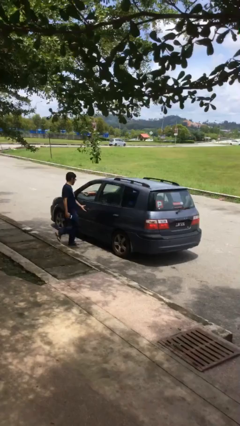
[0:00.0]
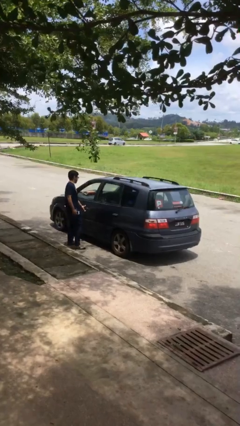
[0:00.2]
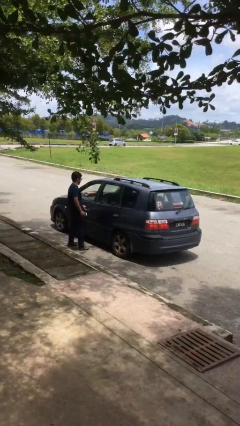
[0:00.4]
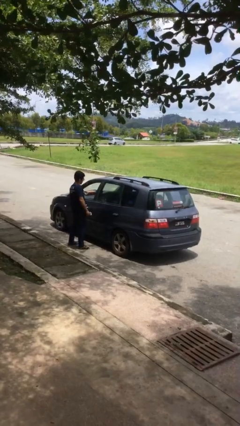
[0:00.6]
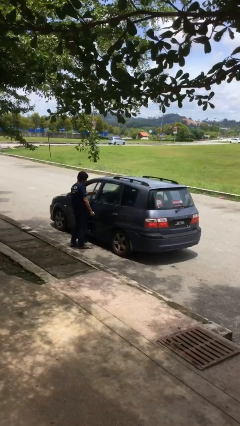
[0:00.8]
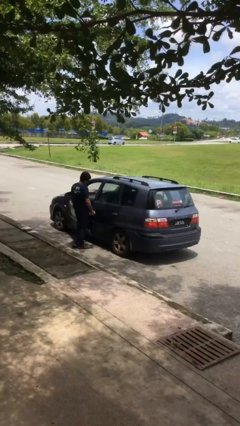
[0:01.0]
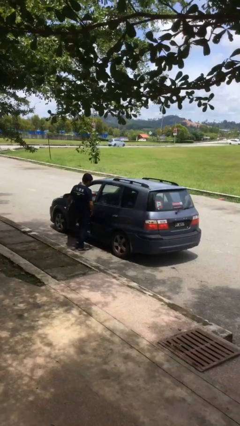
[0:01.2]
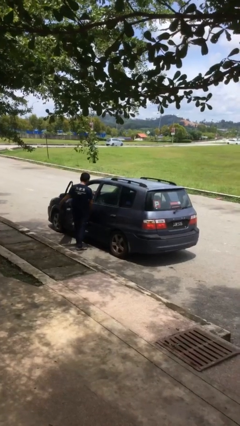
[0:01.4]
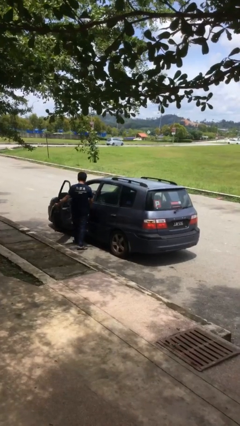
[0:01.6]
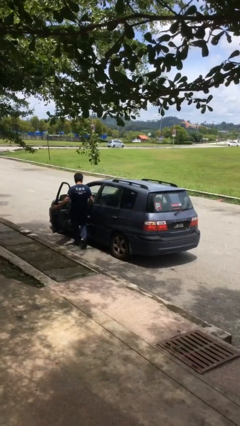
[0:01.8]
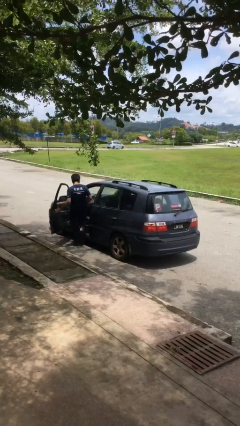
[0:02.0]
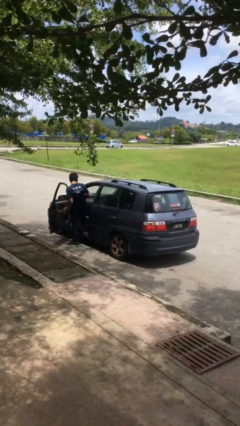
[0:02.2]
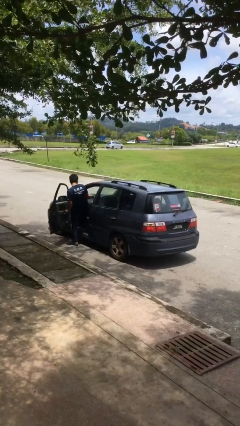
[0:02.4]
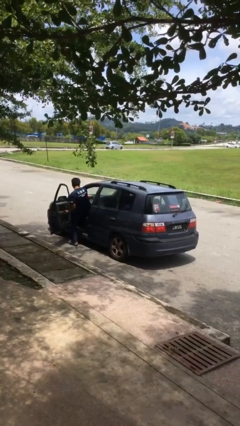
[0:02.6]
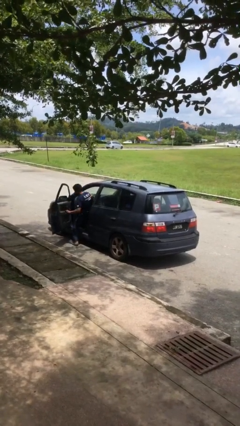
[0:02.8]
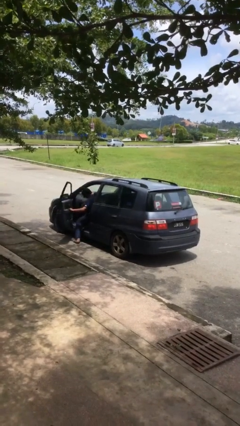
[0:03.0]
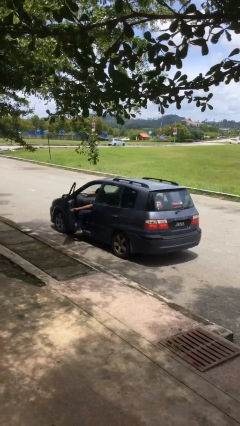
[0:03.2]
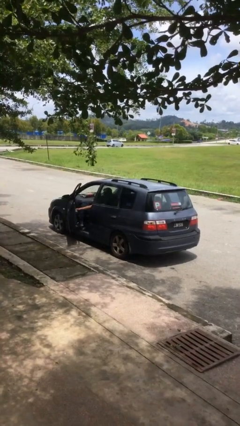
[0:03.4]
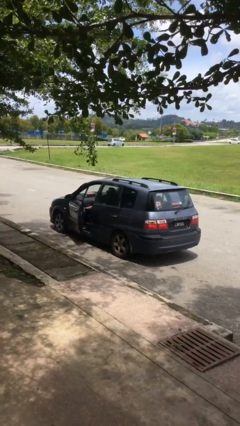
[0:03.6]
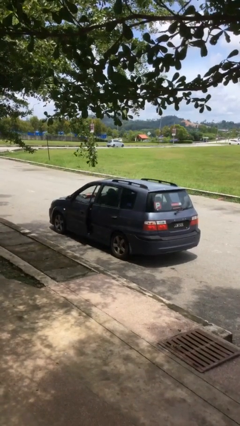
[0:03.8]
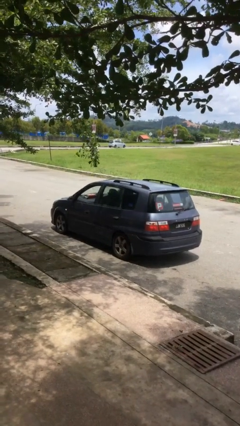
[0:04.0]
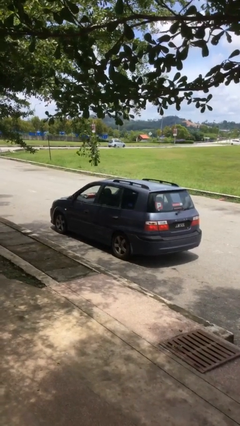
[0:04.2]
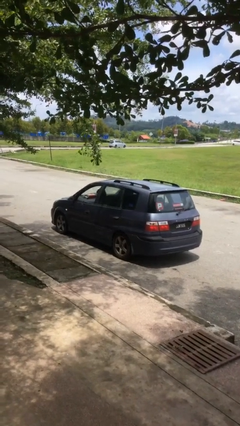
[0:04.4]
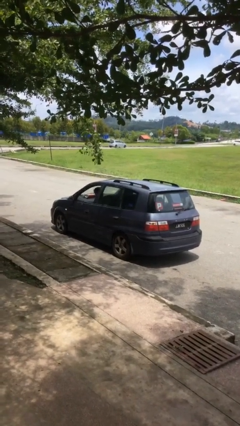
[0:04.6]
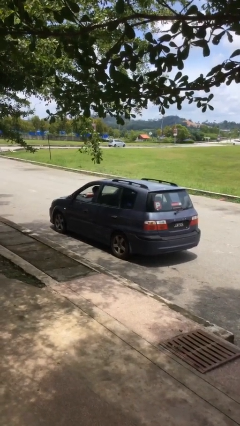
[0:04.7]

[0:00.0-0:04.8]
car picks up person

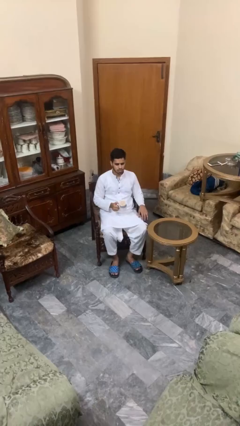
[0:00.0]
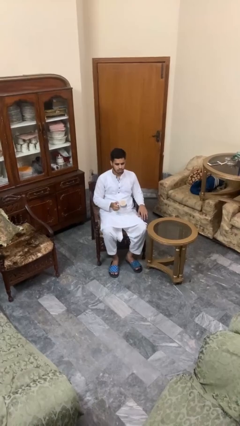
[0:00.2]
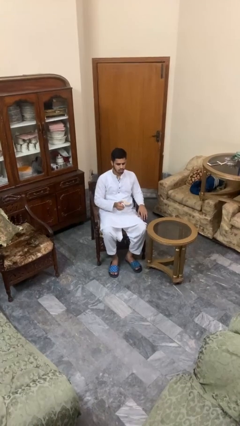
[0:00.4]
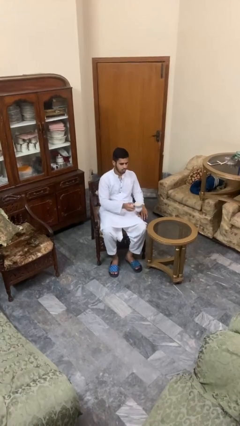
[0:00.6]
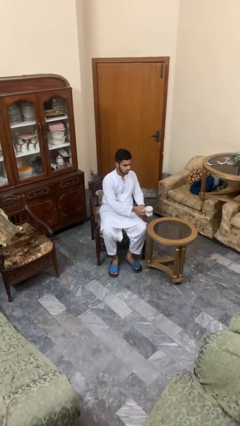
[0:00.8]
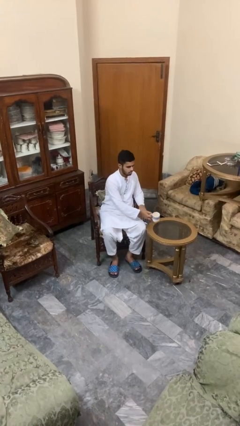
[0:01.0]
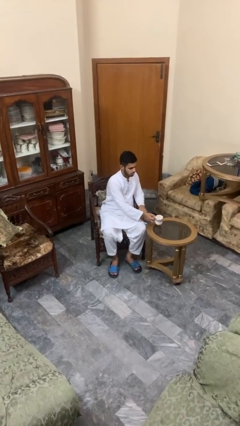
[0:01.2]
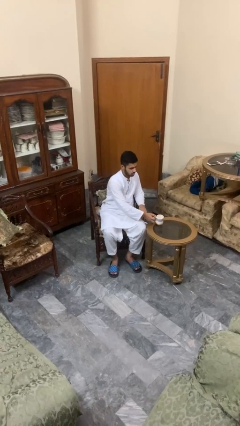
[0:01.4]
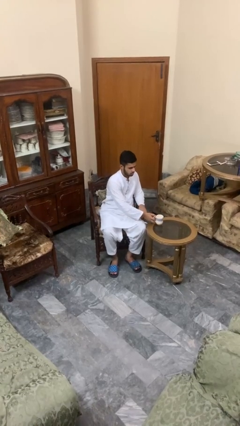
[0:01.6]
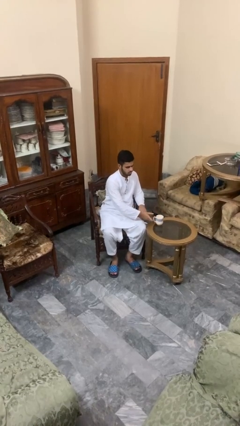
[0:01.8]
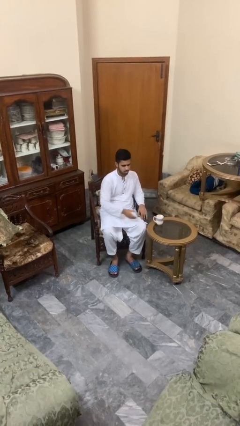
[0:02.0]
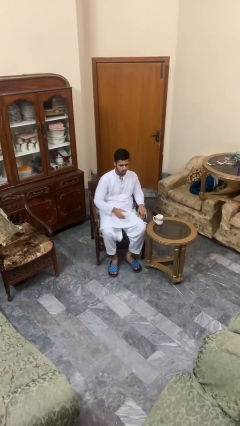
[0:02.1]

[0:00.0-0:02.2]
person puts down object on table

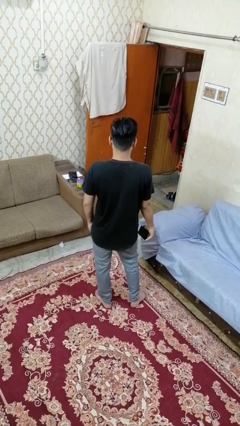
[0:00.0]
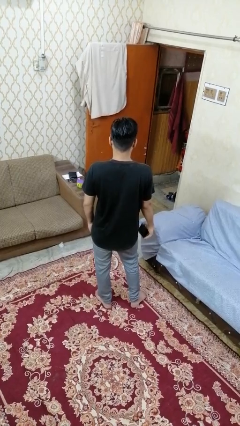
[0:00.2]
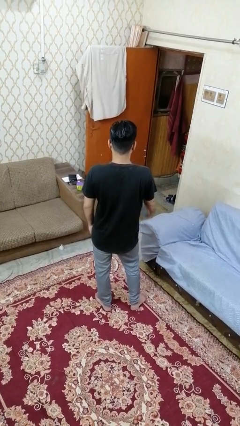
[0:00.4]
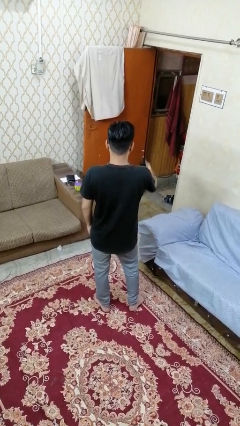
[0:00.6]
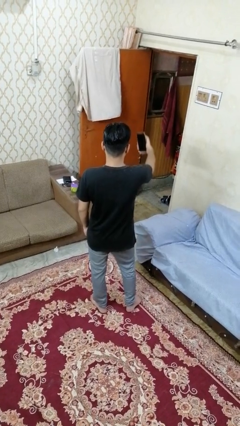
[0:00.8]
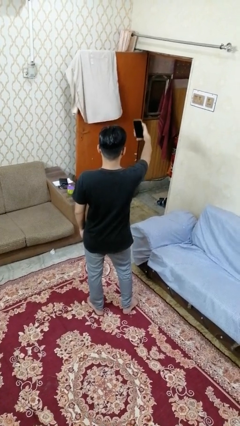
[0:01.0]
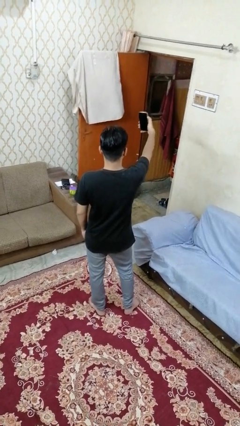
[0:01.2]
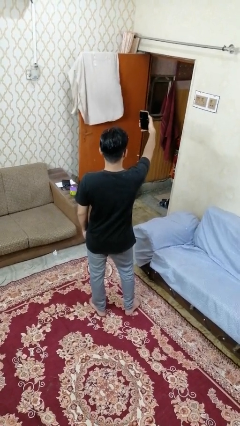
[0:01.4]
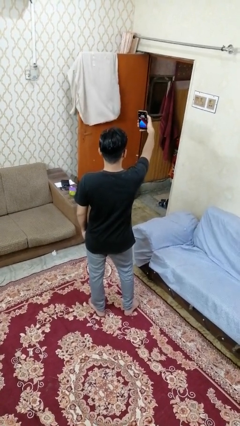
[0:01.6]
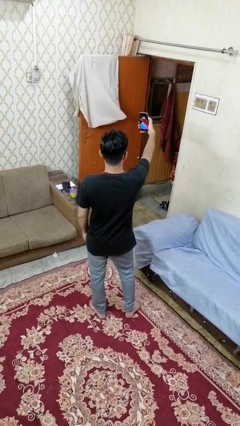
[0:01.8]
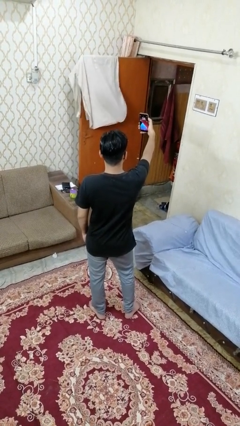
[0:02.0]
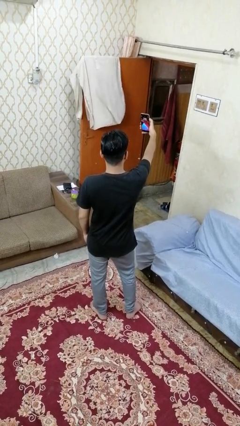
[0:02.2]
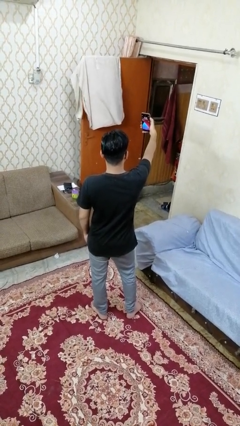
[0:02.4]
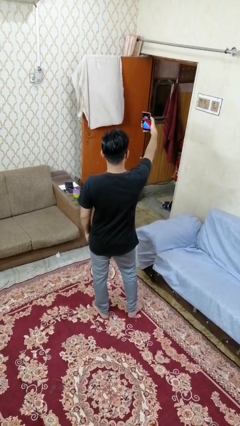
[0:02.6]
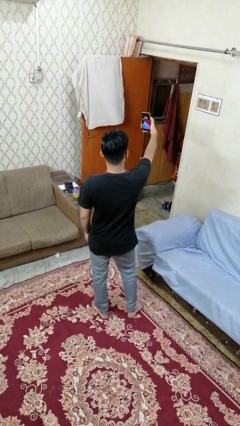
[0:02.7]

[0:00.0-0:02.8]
person takes selfie

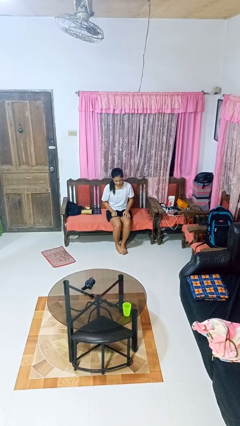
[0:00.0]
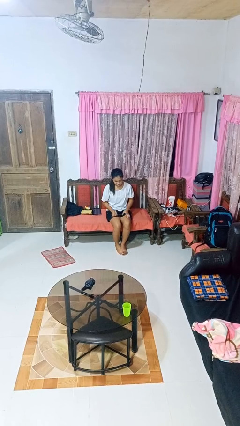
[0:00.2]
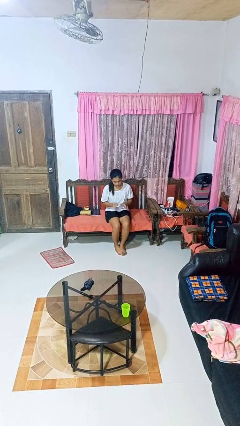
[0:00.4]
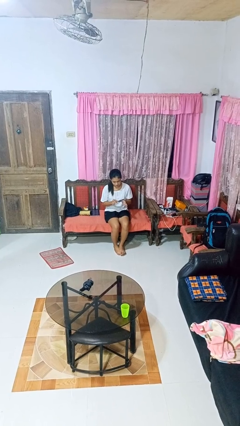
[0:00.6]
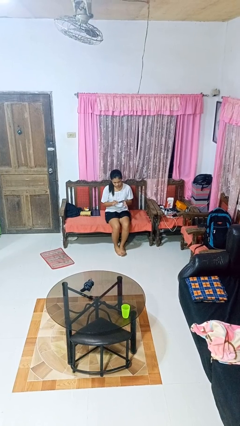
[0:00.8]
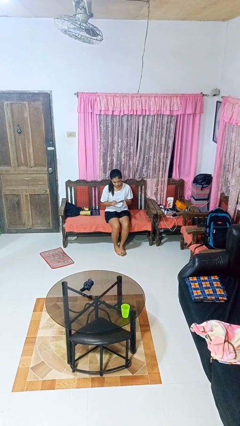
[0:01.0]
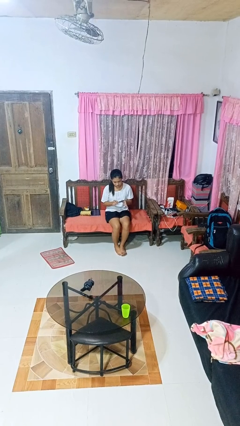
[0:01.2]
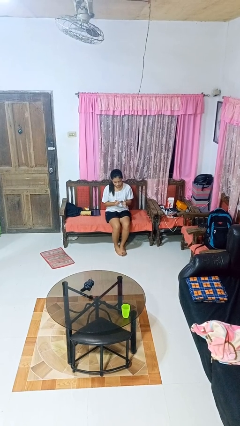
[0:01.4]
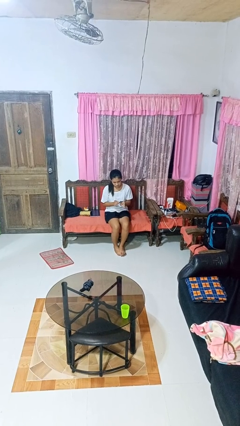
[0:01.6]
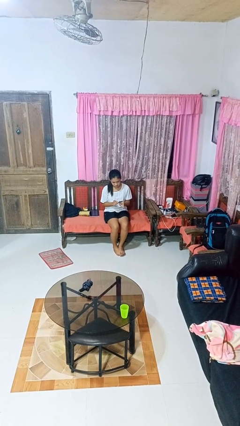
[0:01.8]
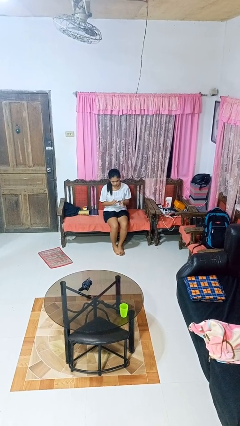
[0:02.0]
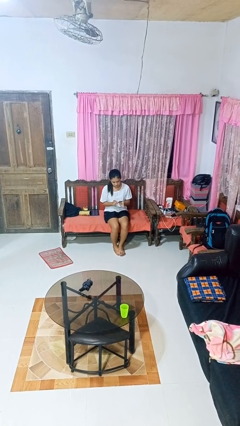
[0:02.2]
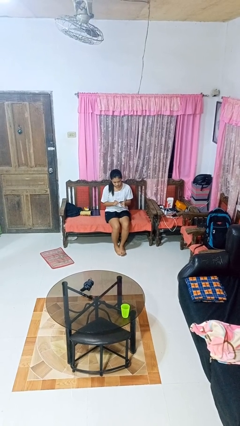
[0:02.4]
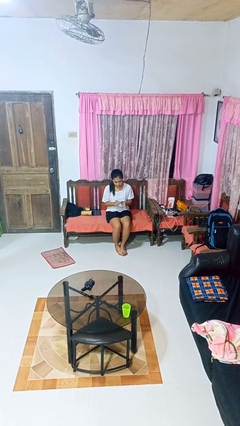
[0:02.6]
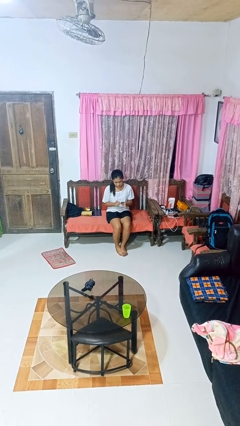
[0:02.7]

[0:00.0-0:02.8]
person files fingernails

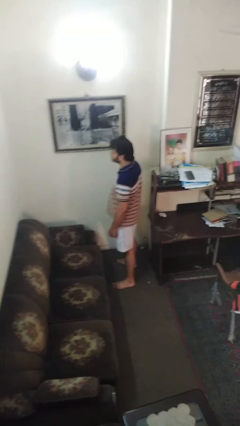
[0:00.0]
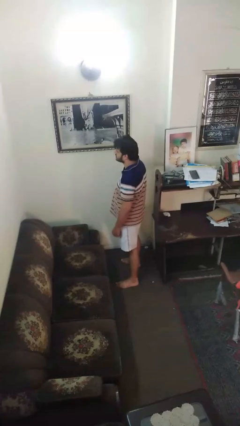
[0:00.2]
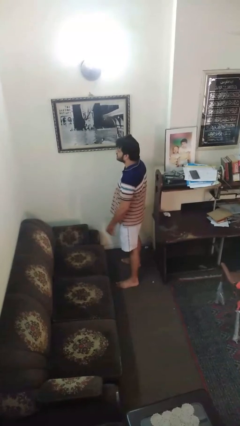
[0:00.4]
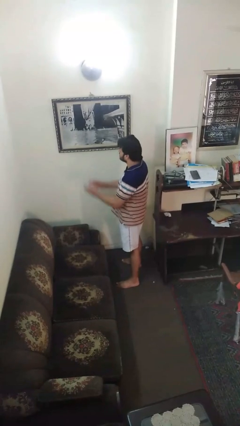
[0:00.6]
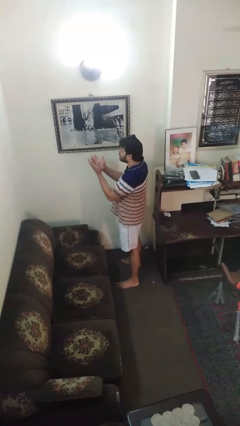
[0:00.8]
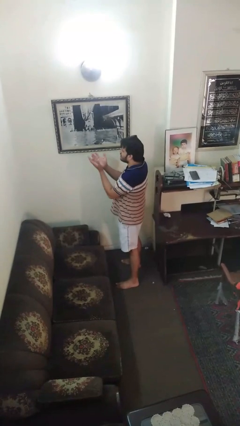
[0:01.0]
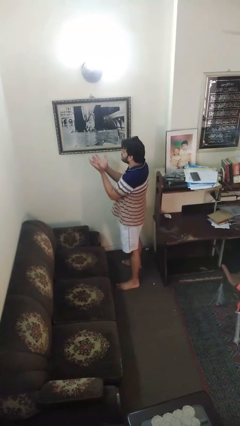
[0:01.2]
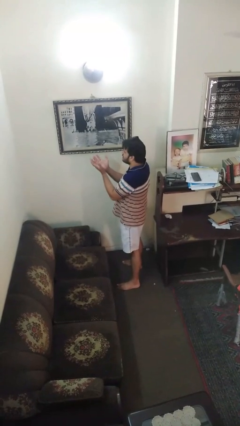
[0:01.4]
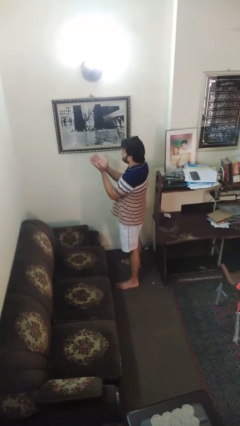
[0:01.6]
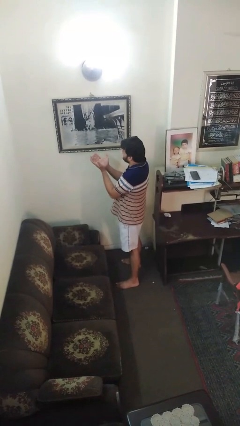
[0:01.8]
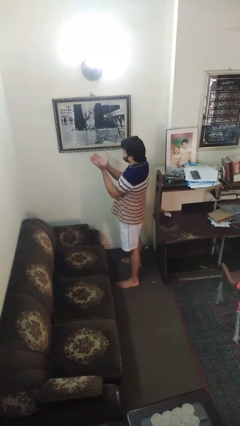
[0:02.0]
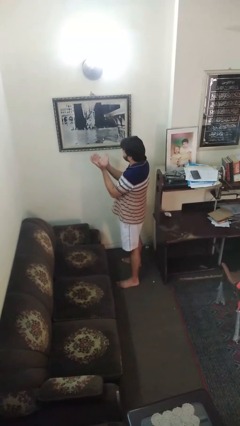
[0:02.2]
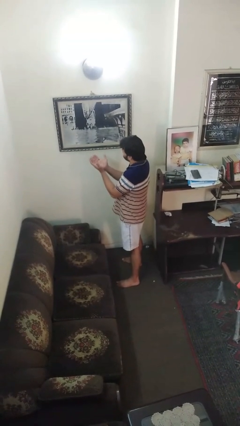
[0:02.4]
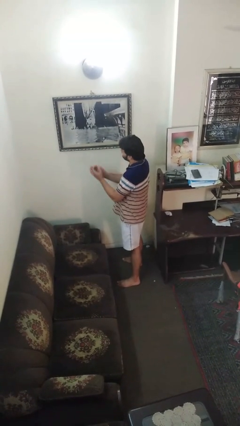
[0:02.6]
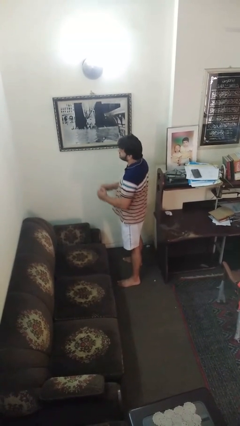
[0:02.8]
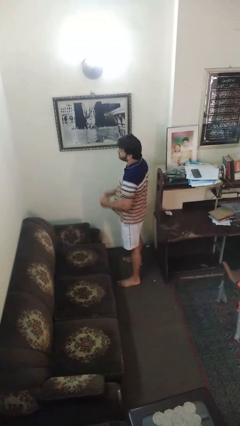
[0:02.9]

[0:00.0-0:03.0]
person prays

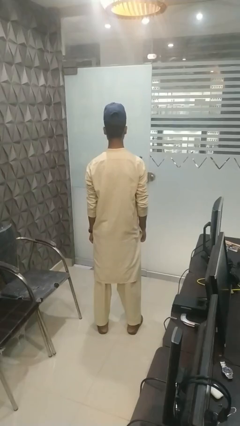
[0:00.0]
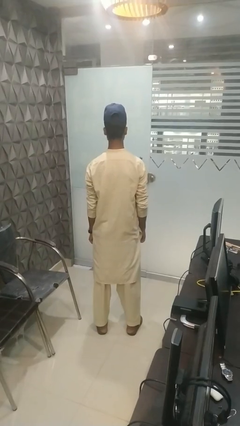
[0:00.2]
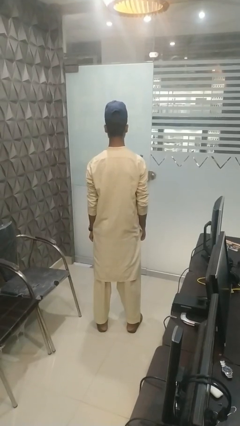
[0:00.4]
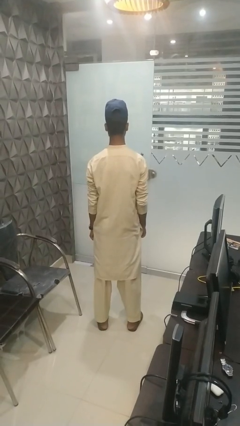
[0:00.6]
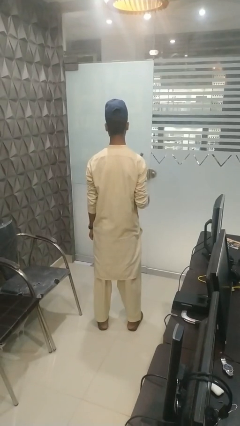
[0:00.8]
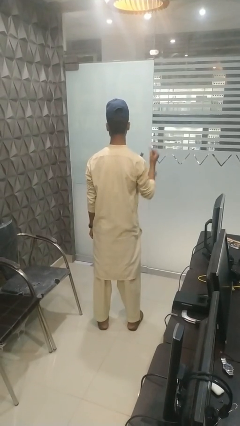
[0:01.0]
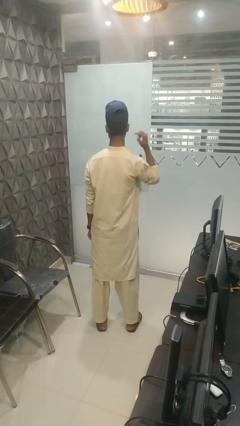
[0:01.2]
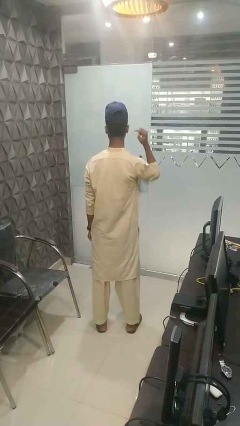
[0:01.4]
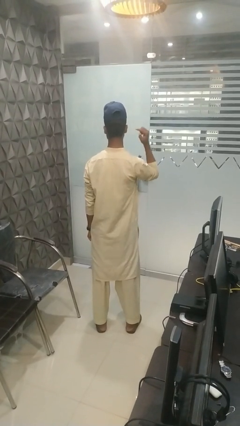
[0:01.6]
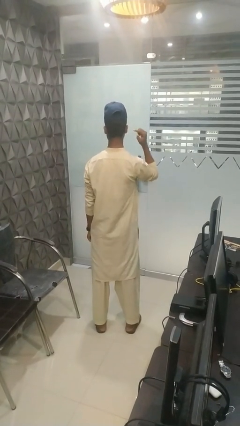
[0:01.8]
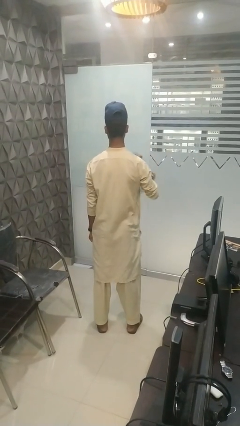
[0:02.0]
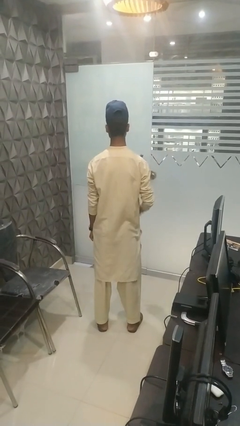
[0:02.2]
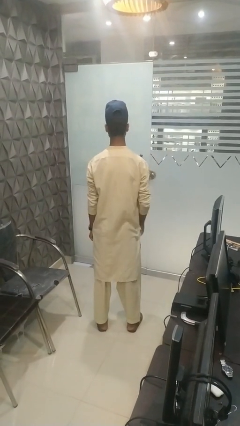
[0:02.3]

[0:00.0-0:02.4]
person gestures listen closely
